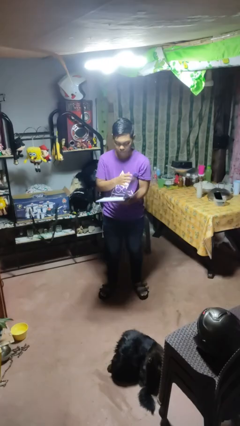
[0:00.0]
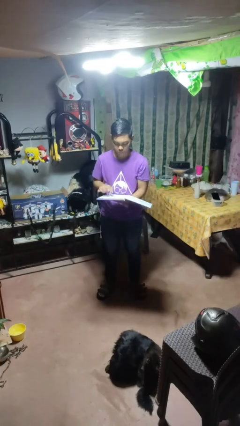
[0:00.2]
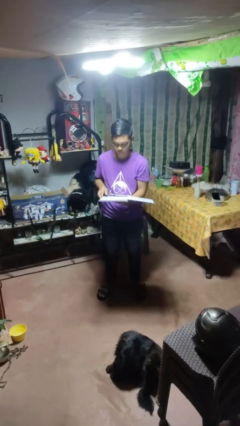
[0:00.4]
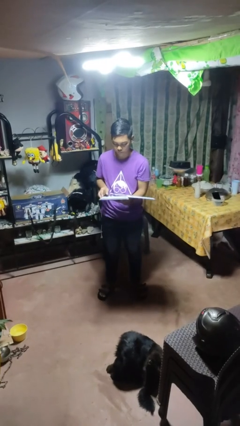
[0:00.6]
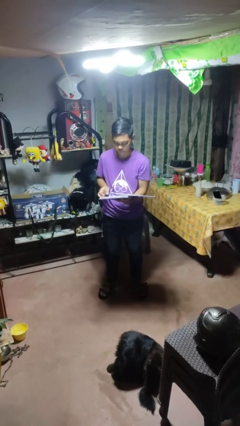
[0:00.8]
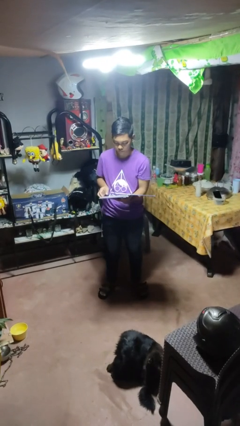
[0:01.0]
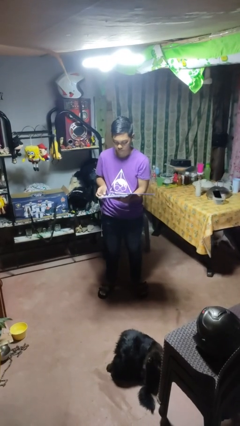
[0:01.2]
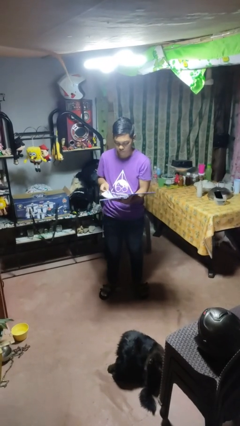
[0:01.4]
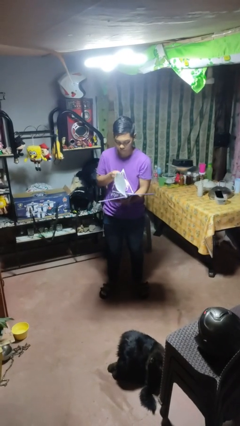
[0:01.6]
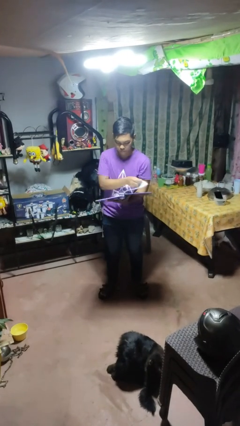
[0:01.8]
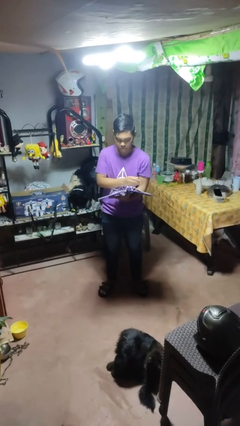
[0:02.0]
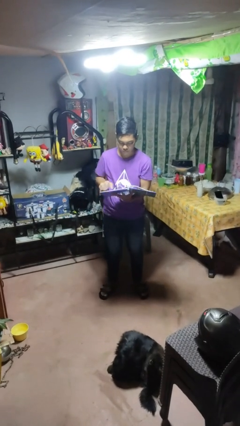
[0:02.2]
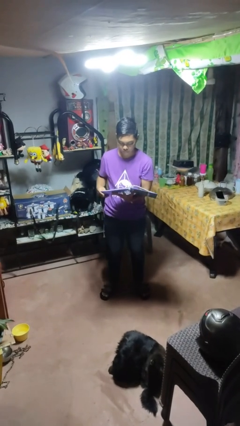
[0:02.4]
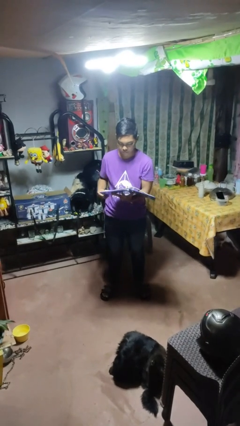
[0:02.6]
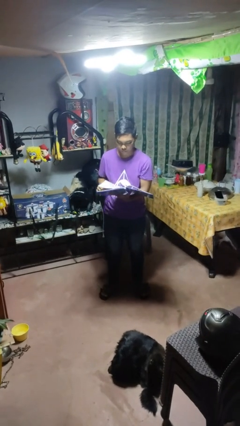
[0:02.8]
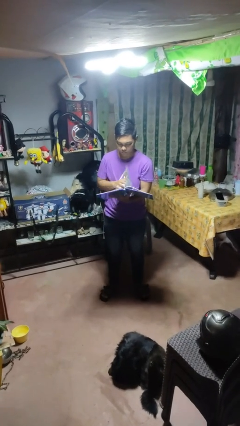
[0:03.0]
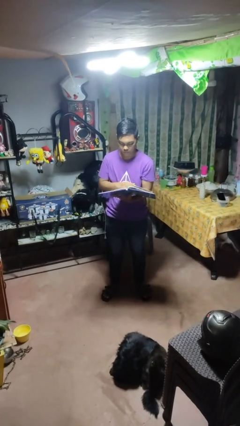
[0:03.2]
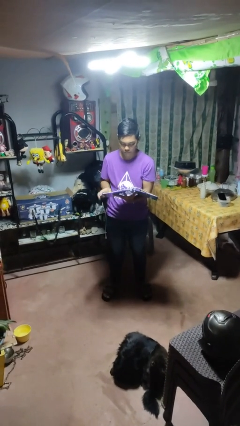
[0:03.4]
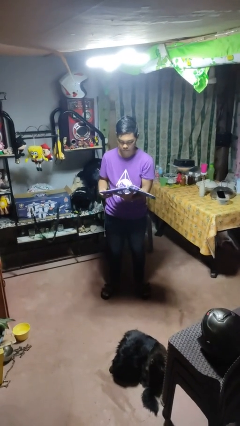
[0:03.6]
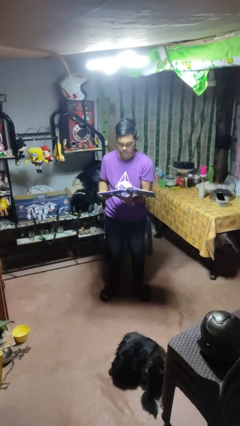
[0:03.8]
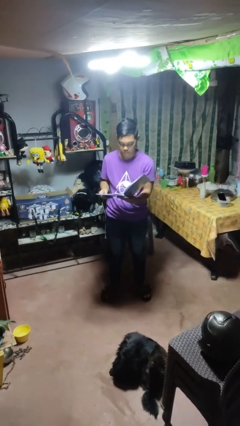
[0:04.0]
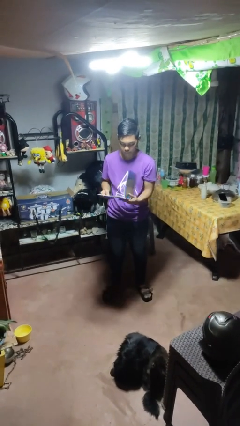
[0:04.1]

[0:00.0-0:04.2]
person reads magazine

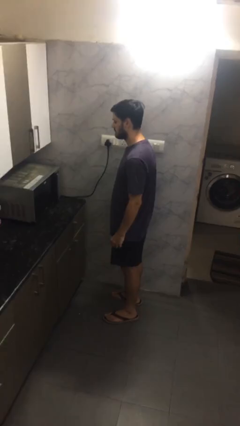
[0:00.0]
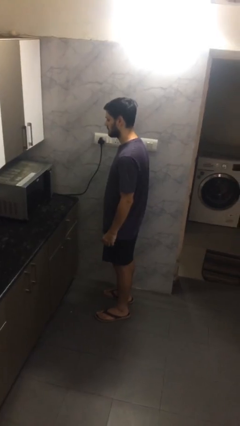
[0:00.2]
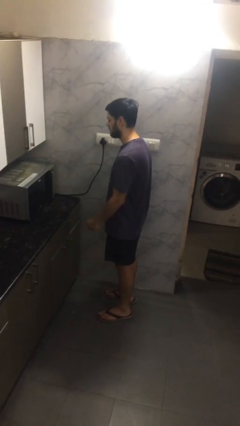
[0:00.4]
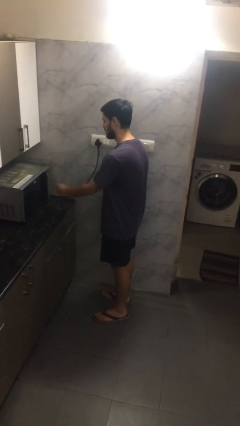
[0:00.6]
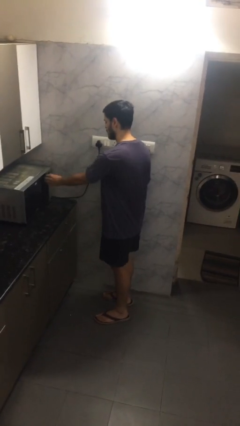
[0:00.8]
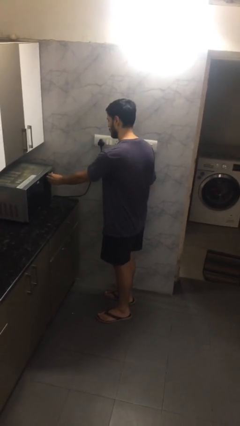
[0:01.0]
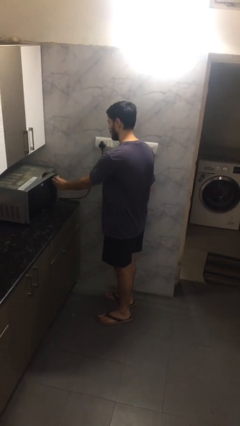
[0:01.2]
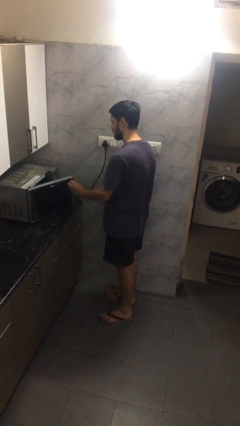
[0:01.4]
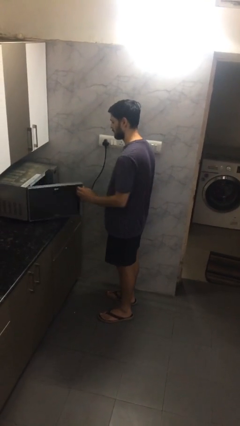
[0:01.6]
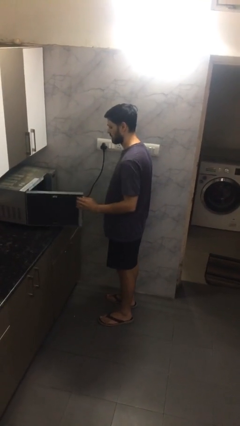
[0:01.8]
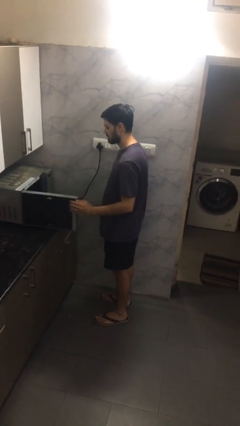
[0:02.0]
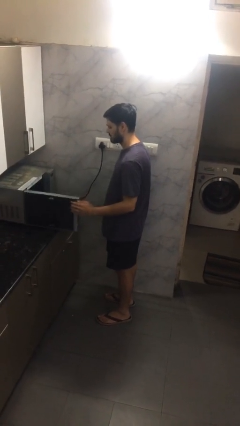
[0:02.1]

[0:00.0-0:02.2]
person opens microwave

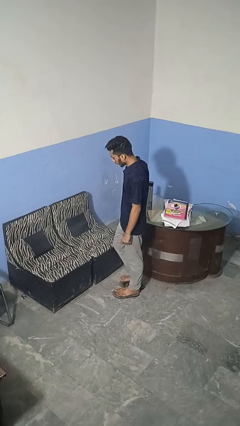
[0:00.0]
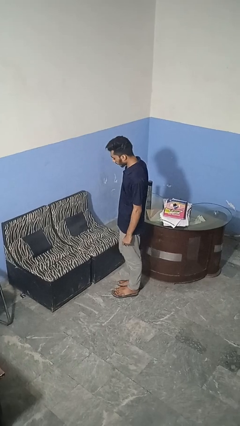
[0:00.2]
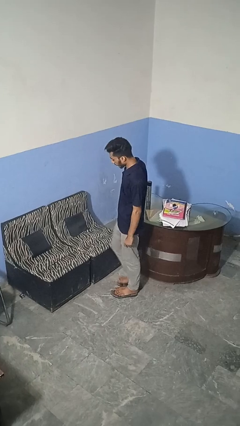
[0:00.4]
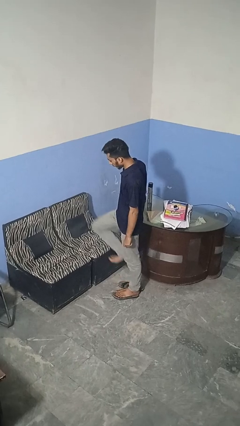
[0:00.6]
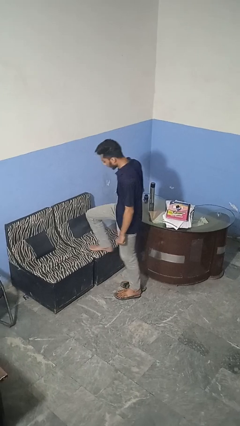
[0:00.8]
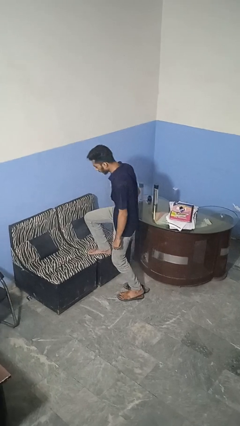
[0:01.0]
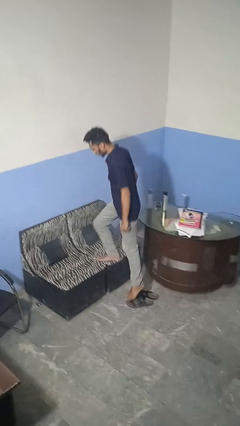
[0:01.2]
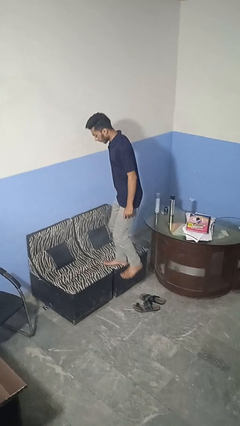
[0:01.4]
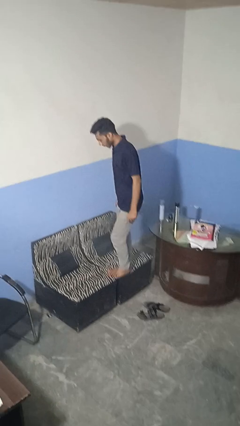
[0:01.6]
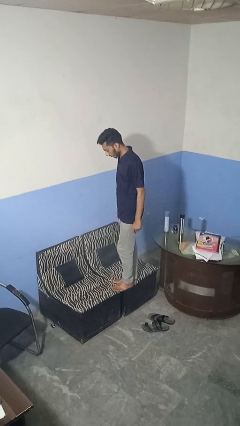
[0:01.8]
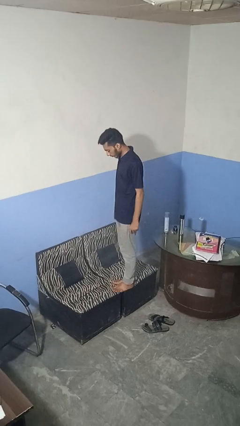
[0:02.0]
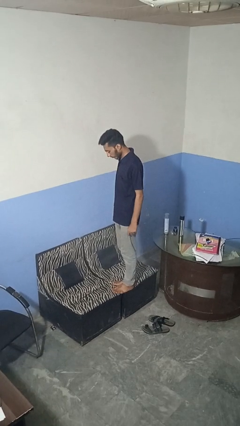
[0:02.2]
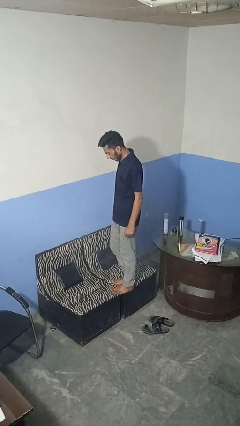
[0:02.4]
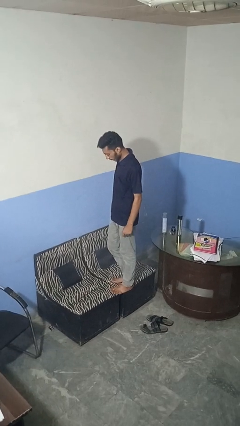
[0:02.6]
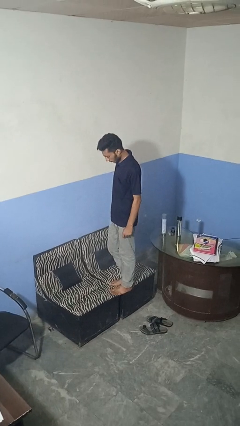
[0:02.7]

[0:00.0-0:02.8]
person climbs on couch

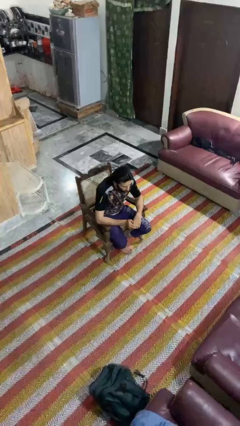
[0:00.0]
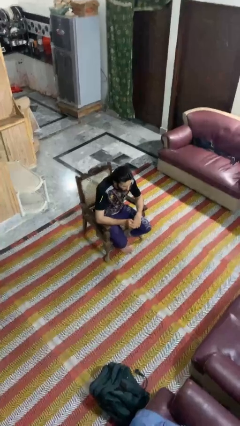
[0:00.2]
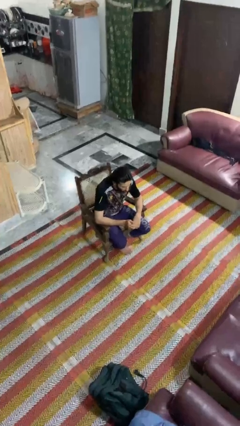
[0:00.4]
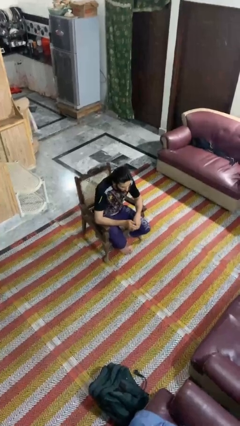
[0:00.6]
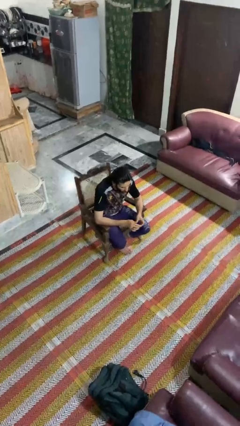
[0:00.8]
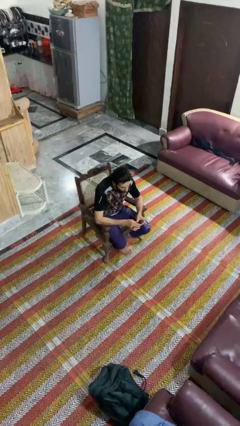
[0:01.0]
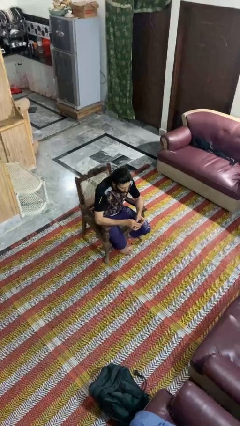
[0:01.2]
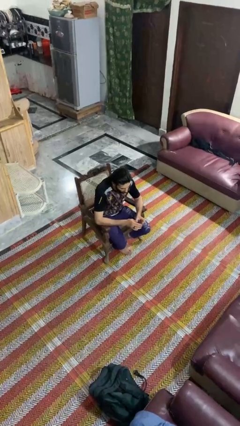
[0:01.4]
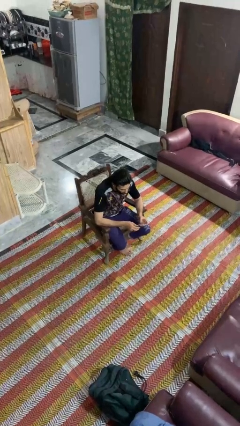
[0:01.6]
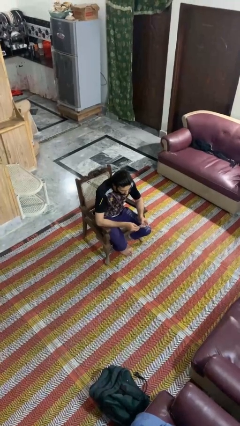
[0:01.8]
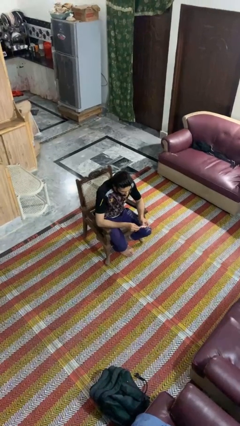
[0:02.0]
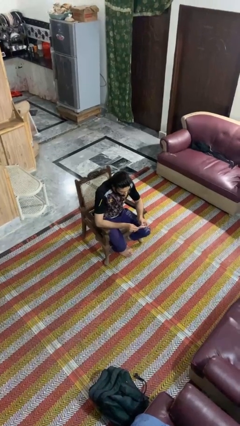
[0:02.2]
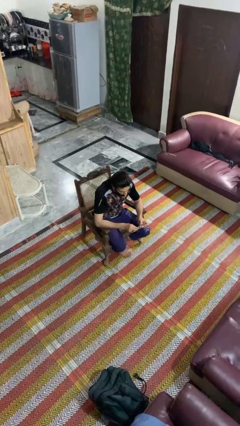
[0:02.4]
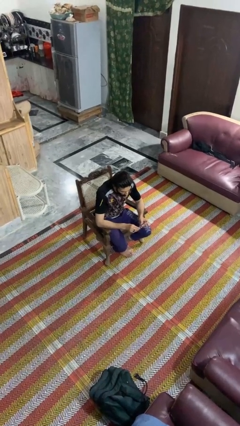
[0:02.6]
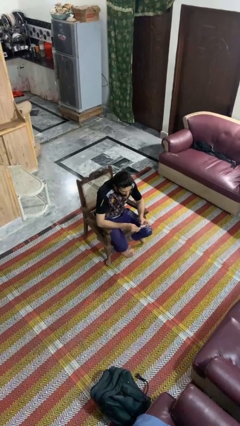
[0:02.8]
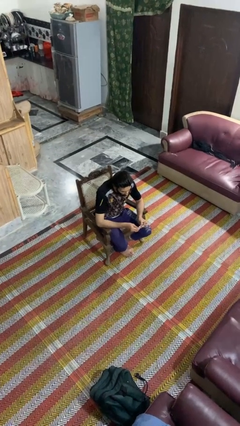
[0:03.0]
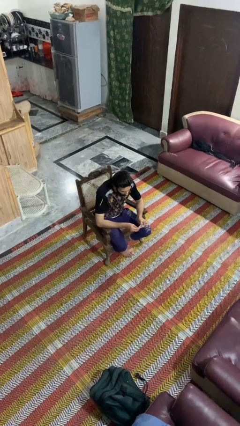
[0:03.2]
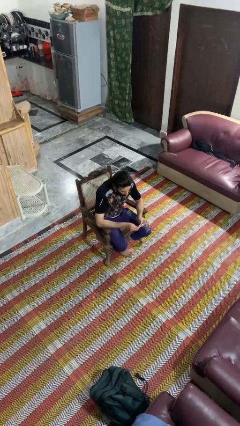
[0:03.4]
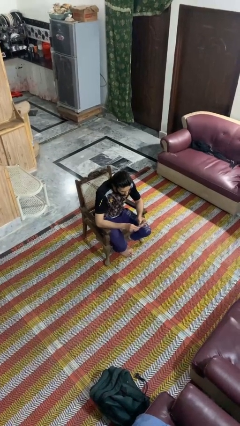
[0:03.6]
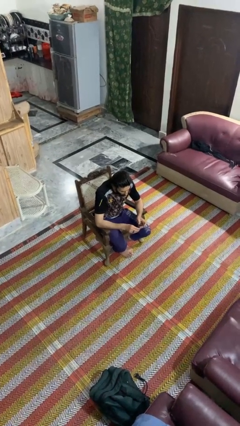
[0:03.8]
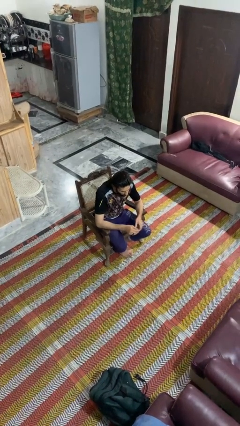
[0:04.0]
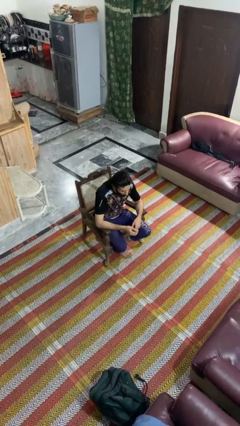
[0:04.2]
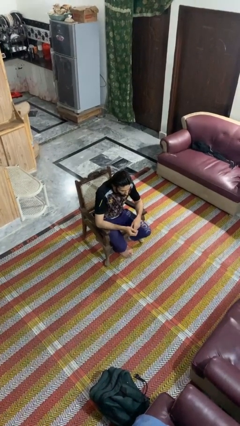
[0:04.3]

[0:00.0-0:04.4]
person clips fingernails

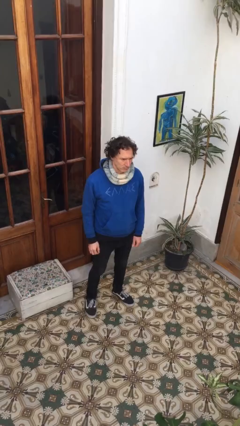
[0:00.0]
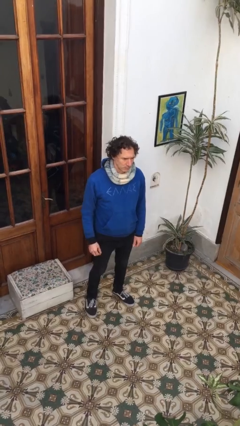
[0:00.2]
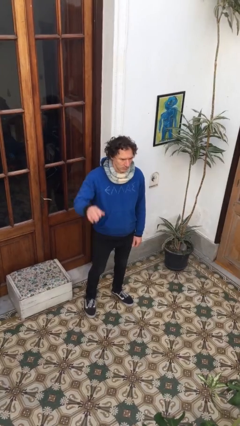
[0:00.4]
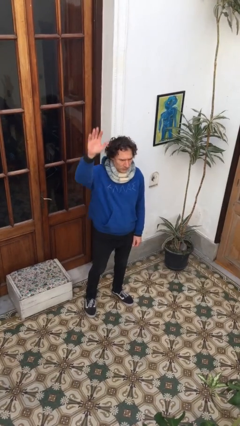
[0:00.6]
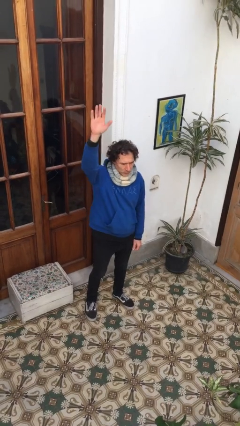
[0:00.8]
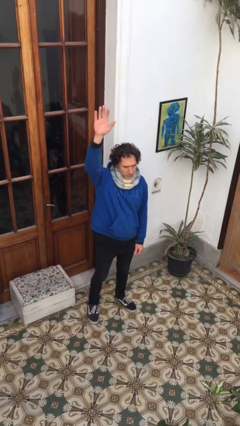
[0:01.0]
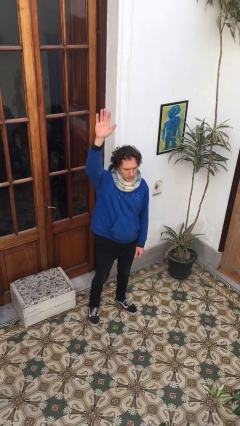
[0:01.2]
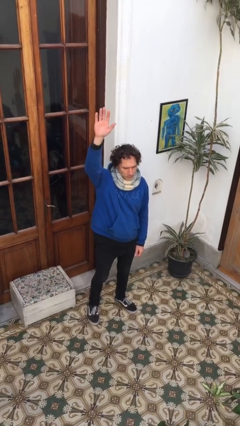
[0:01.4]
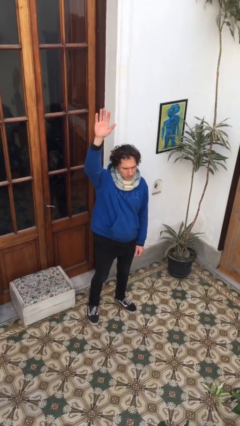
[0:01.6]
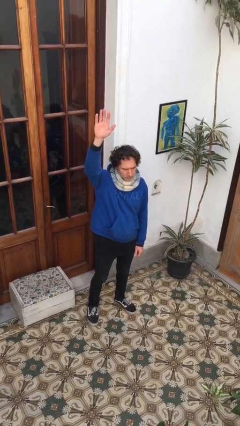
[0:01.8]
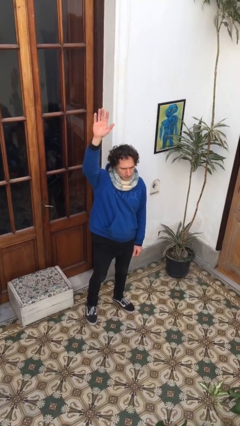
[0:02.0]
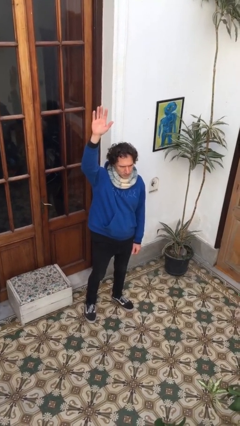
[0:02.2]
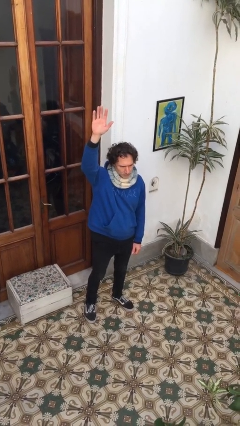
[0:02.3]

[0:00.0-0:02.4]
person gestures raise hand

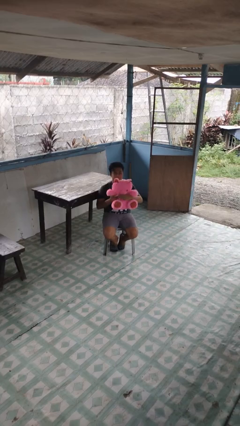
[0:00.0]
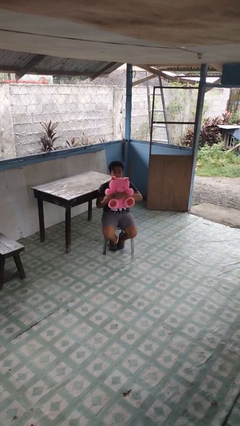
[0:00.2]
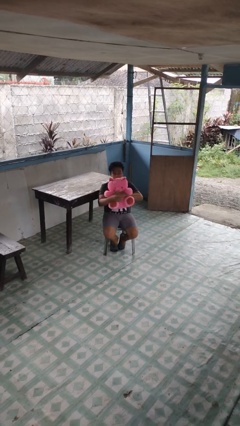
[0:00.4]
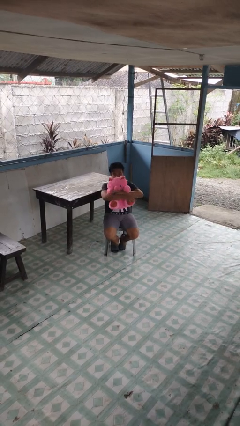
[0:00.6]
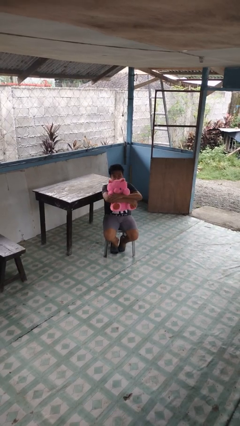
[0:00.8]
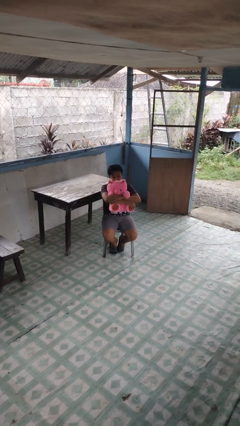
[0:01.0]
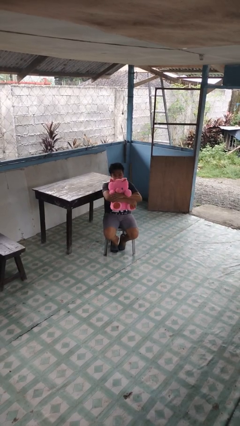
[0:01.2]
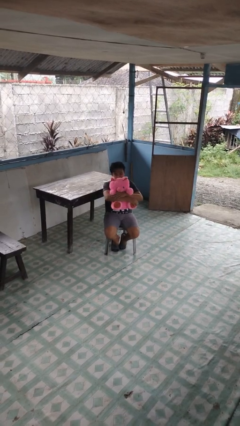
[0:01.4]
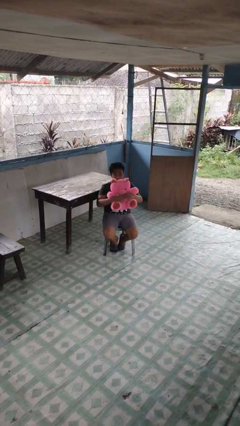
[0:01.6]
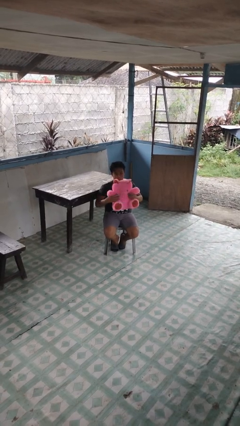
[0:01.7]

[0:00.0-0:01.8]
person hugs stuffed animal
